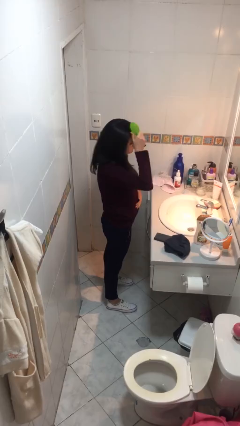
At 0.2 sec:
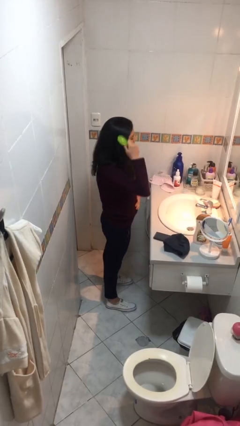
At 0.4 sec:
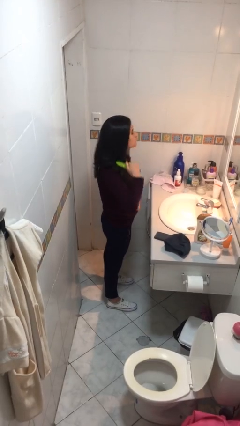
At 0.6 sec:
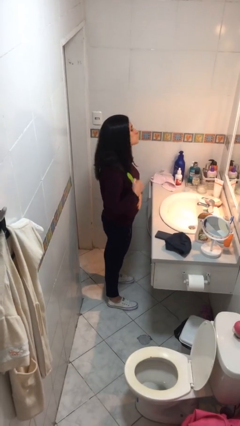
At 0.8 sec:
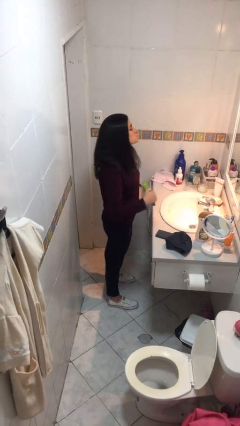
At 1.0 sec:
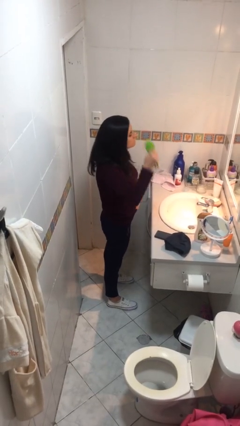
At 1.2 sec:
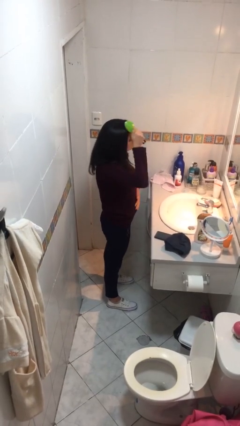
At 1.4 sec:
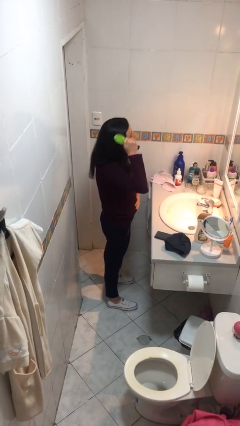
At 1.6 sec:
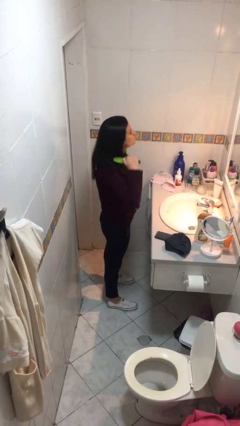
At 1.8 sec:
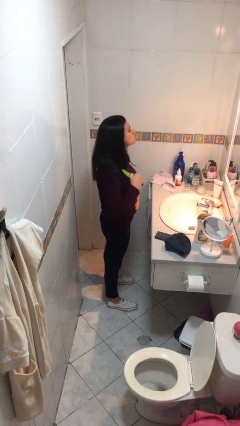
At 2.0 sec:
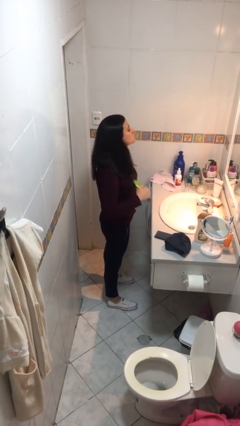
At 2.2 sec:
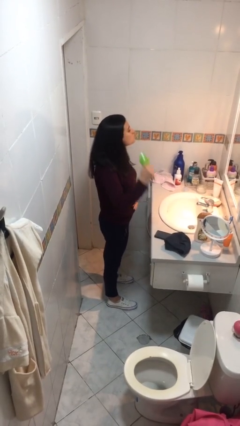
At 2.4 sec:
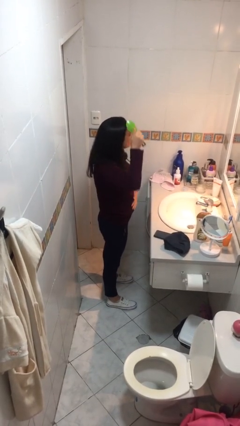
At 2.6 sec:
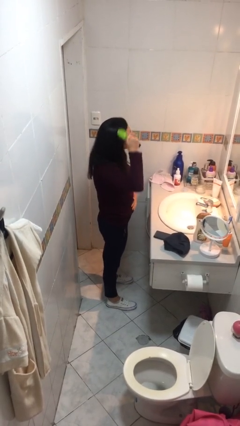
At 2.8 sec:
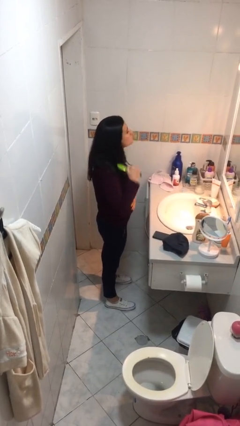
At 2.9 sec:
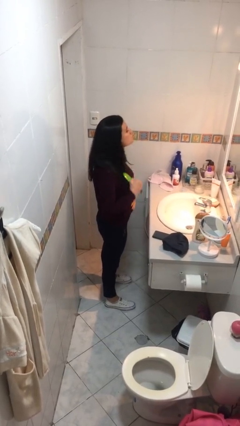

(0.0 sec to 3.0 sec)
person brushes hair

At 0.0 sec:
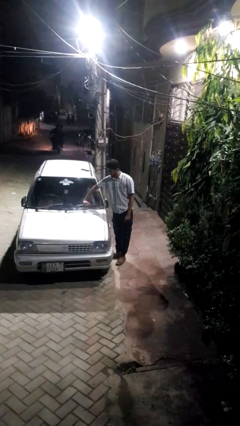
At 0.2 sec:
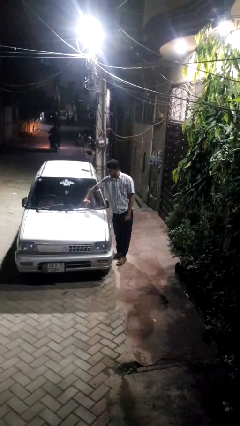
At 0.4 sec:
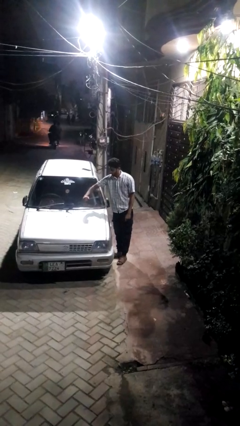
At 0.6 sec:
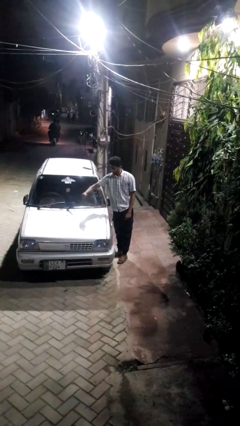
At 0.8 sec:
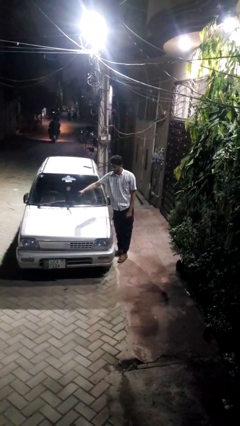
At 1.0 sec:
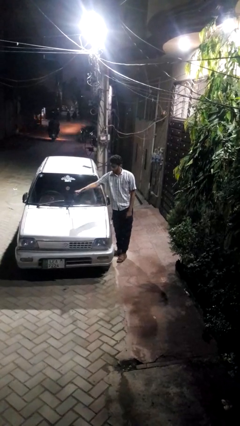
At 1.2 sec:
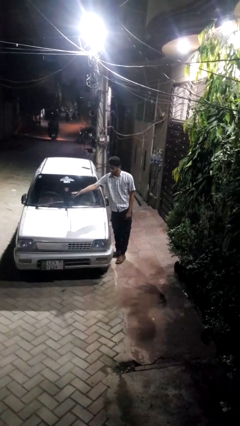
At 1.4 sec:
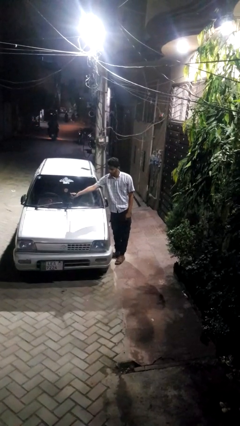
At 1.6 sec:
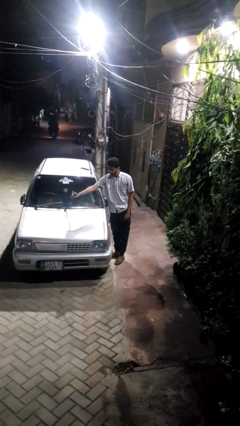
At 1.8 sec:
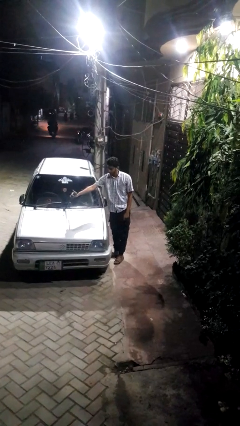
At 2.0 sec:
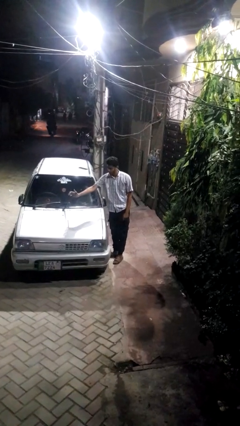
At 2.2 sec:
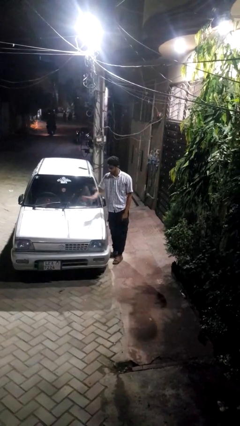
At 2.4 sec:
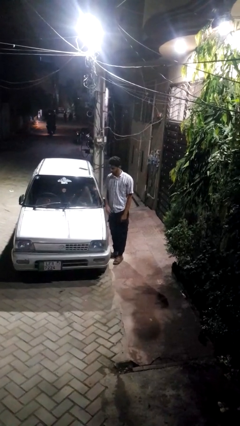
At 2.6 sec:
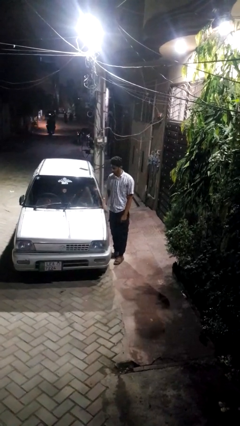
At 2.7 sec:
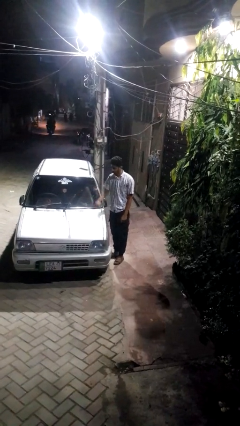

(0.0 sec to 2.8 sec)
person flips up car wipers

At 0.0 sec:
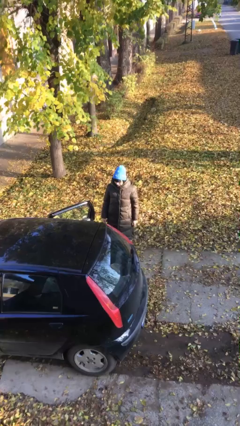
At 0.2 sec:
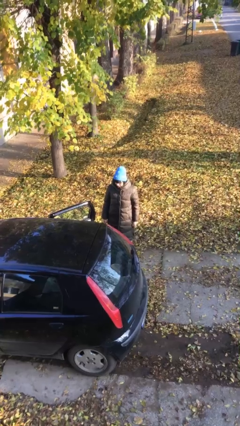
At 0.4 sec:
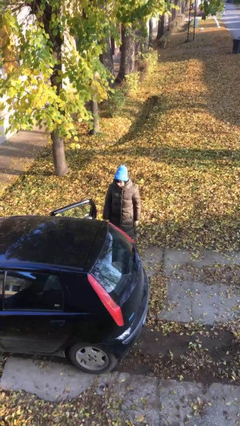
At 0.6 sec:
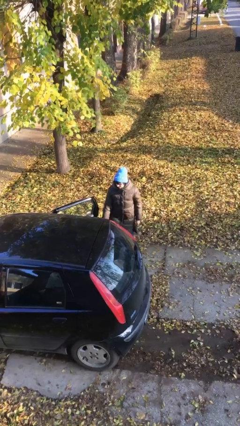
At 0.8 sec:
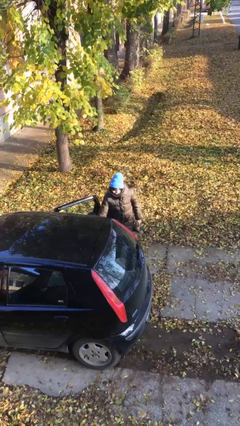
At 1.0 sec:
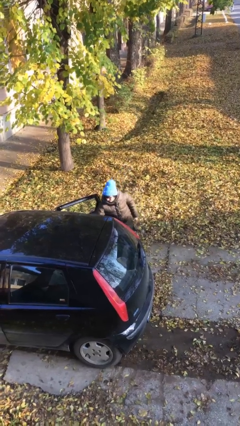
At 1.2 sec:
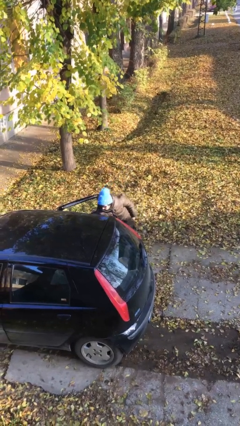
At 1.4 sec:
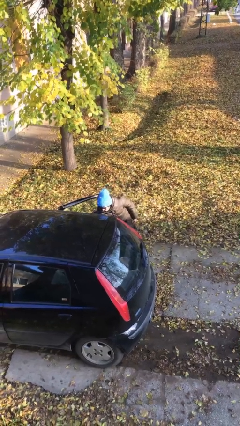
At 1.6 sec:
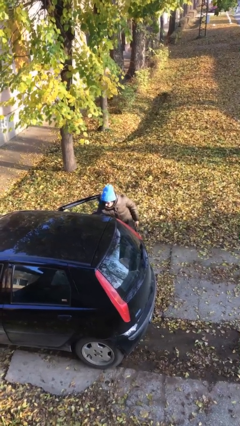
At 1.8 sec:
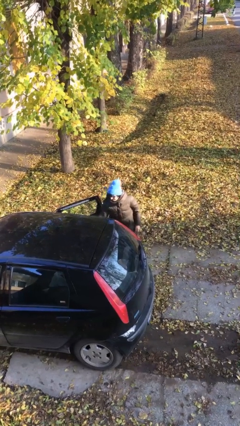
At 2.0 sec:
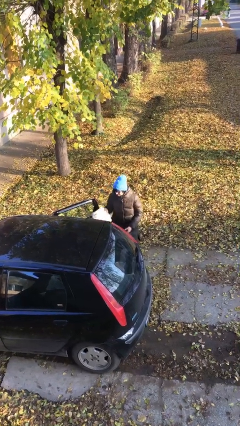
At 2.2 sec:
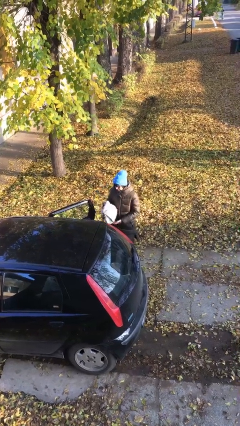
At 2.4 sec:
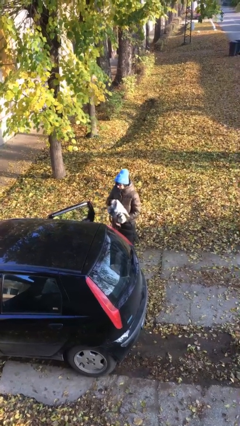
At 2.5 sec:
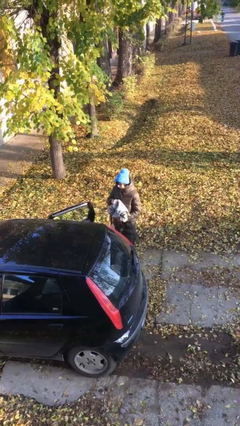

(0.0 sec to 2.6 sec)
person unloads car

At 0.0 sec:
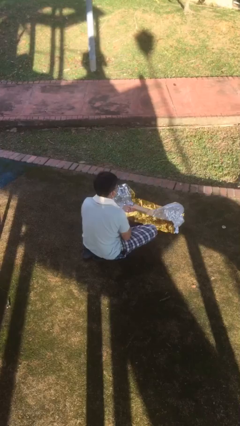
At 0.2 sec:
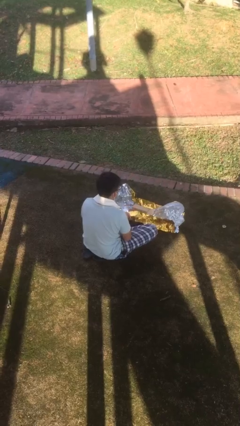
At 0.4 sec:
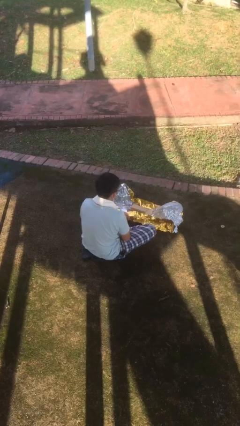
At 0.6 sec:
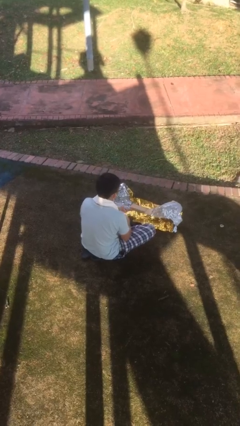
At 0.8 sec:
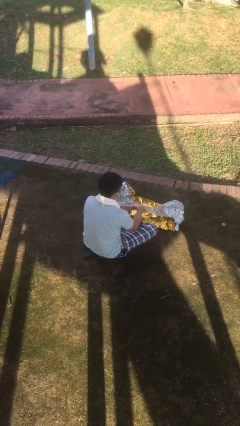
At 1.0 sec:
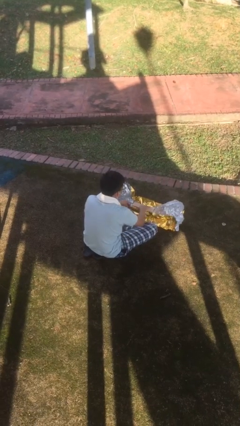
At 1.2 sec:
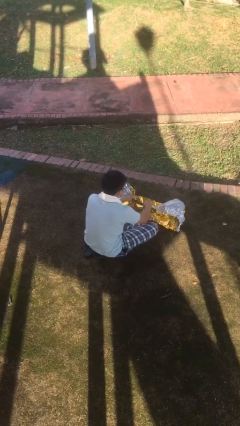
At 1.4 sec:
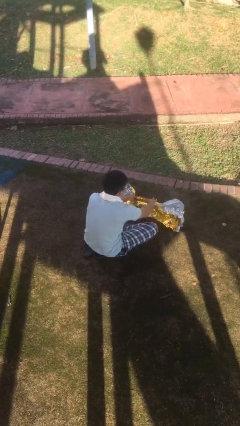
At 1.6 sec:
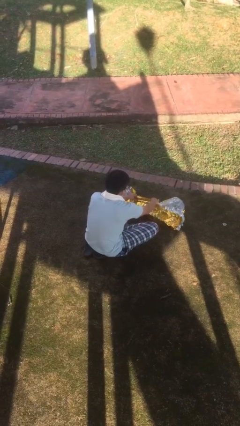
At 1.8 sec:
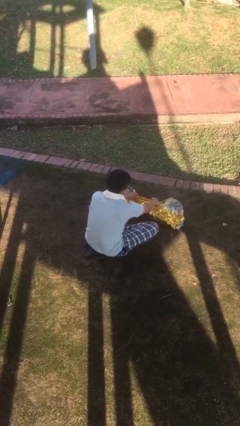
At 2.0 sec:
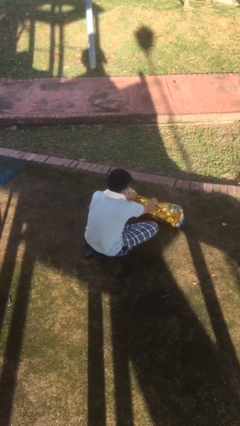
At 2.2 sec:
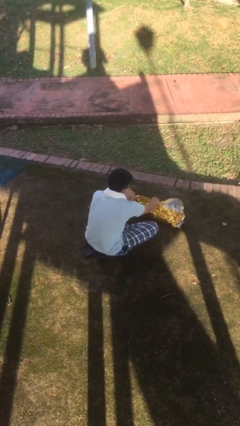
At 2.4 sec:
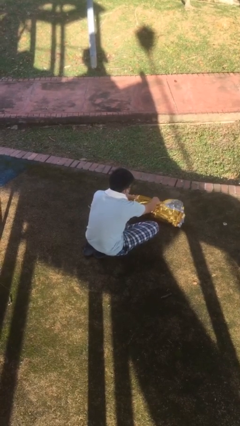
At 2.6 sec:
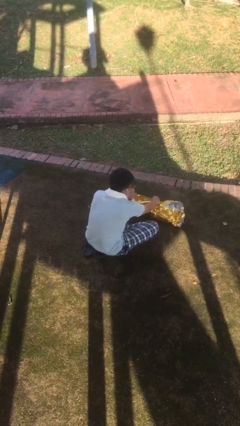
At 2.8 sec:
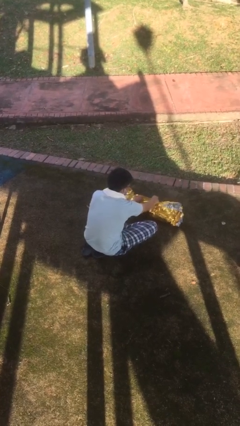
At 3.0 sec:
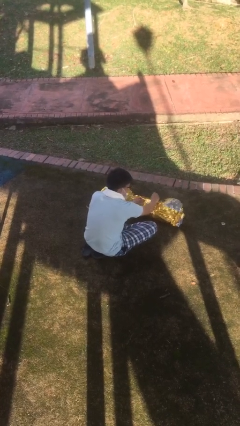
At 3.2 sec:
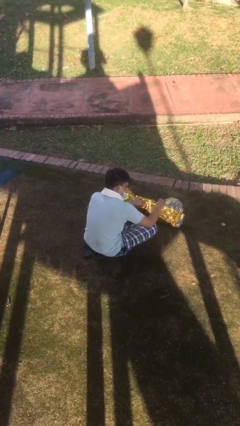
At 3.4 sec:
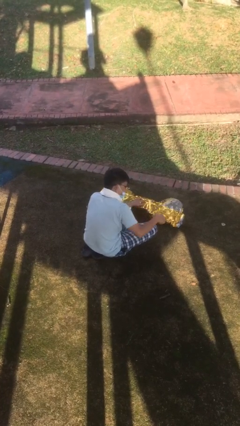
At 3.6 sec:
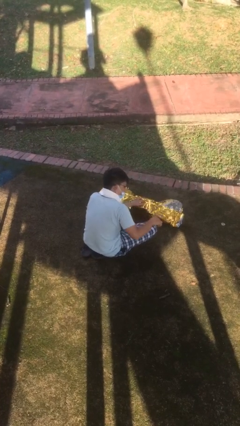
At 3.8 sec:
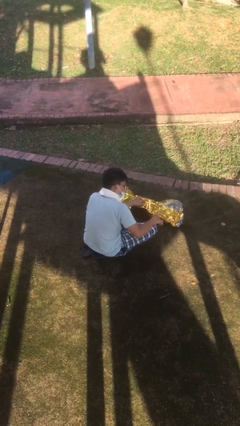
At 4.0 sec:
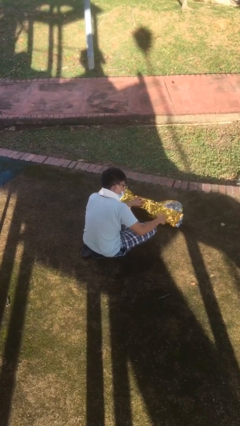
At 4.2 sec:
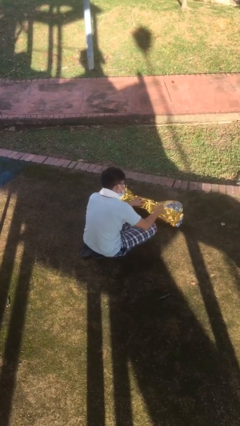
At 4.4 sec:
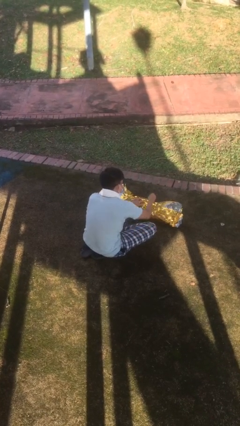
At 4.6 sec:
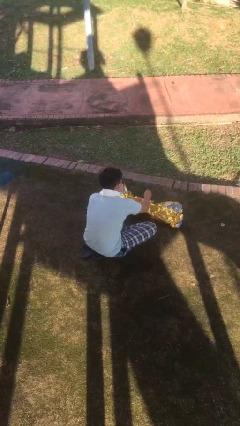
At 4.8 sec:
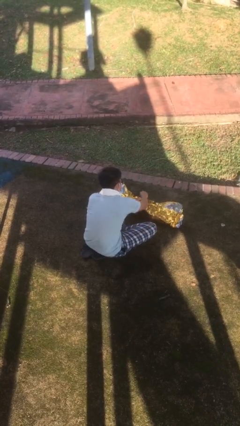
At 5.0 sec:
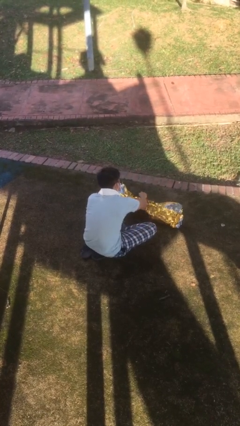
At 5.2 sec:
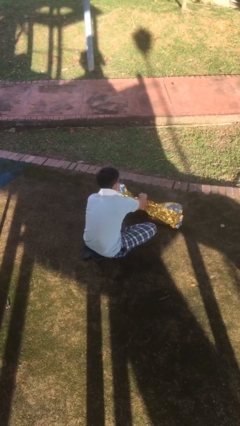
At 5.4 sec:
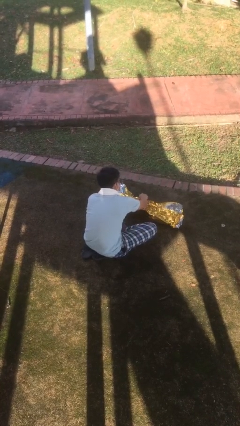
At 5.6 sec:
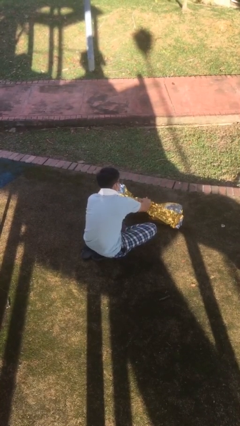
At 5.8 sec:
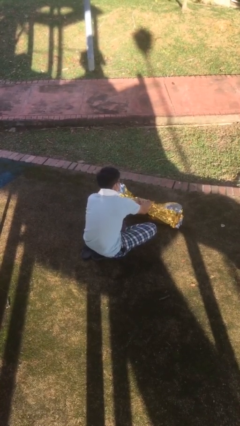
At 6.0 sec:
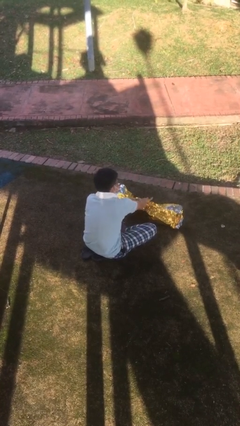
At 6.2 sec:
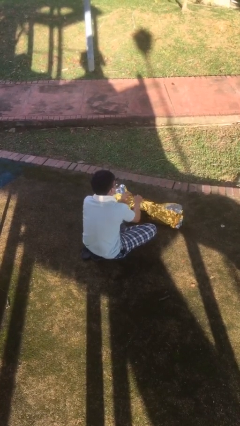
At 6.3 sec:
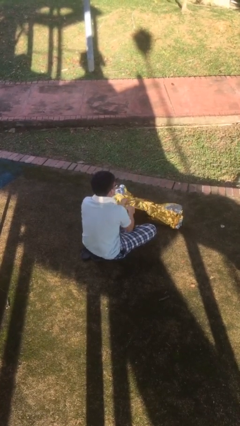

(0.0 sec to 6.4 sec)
person wraps box

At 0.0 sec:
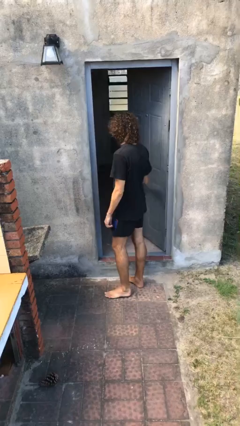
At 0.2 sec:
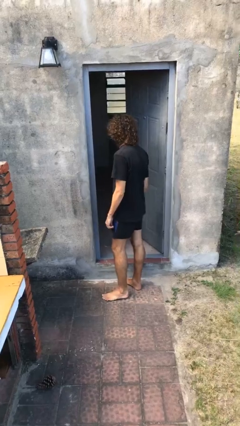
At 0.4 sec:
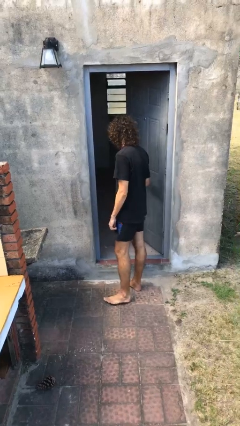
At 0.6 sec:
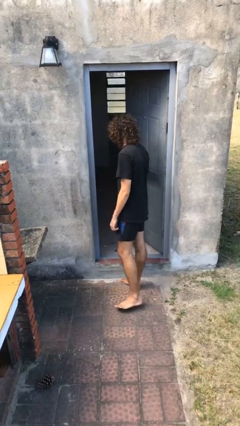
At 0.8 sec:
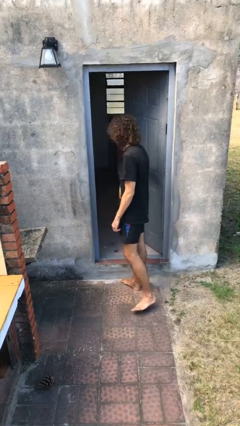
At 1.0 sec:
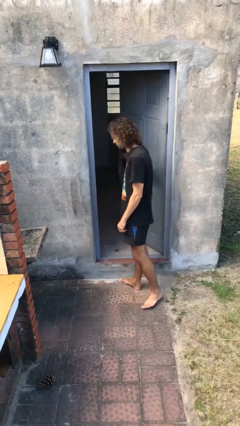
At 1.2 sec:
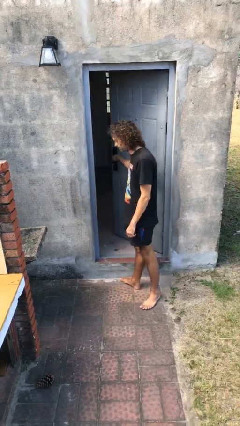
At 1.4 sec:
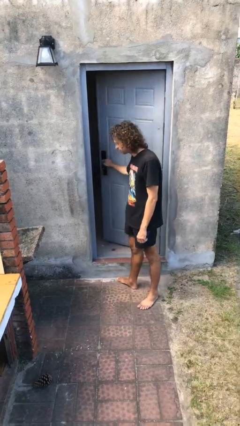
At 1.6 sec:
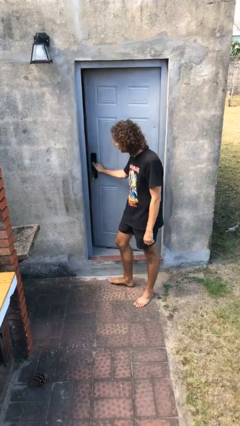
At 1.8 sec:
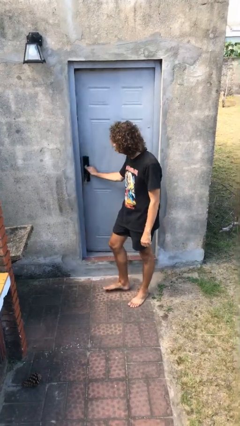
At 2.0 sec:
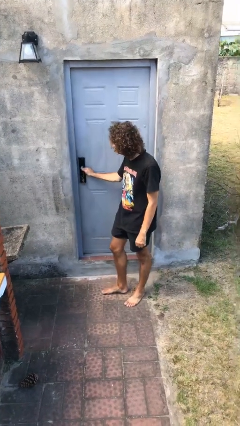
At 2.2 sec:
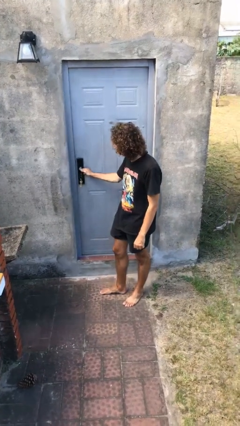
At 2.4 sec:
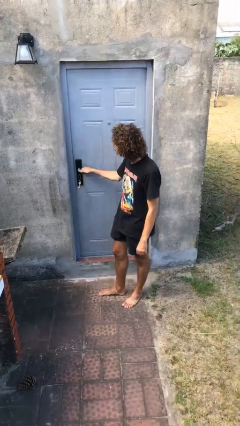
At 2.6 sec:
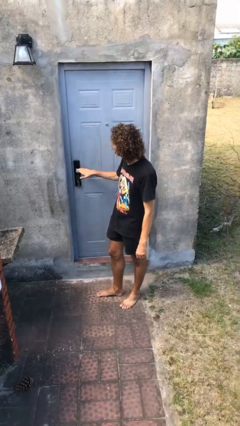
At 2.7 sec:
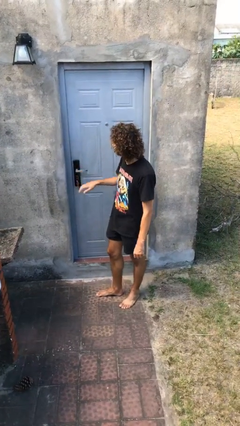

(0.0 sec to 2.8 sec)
person closes facility door
